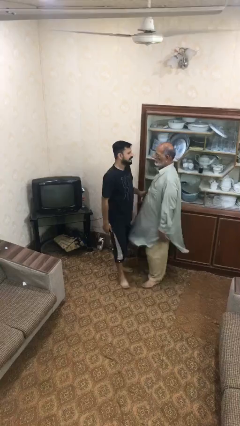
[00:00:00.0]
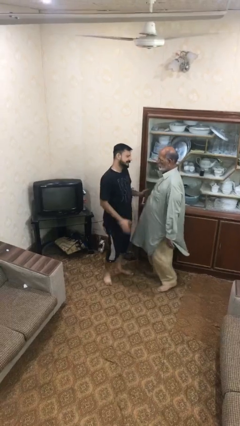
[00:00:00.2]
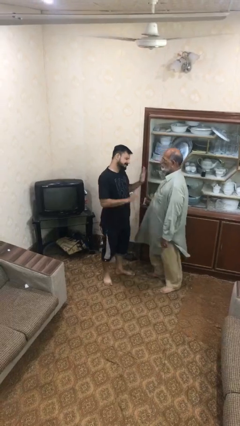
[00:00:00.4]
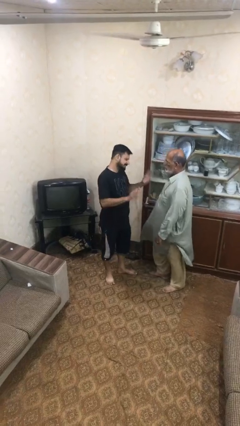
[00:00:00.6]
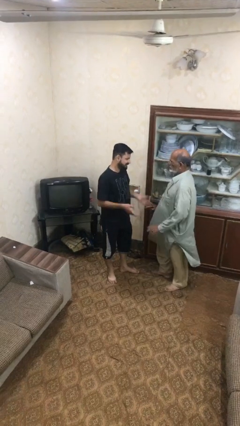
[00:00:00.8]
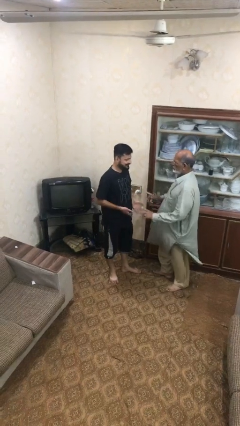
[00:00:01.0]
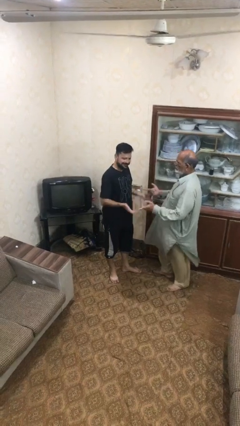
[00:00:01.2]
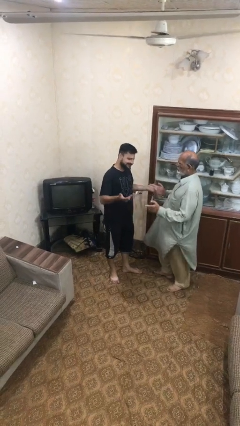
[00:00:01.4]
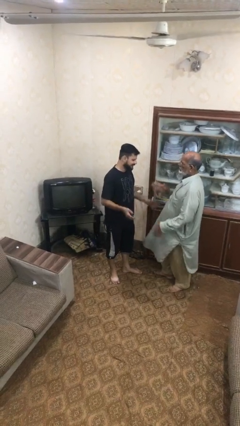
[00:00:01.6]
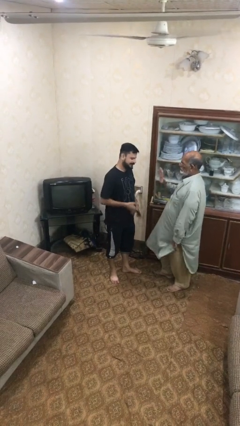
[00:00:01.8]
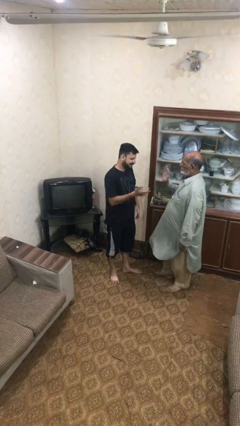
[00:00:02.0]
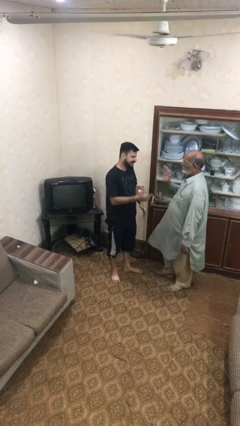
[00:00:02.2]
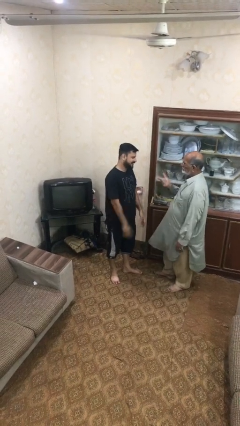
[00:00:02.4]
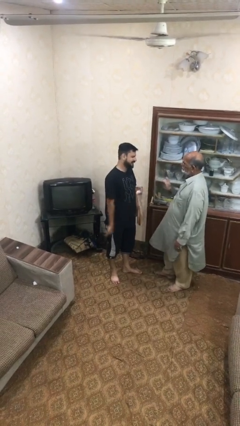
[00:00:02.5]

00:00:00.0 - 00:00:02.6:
person talks to person

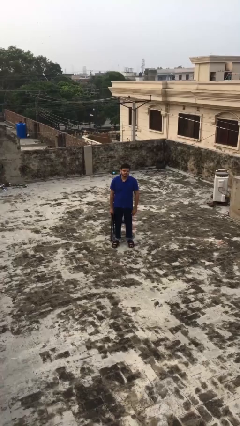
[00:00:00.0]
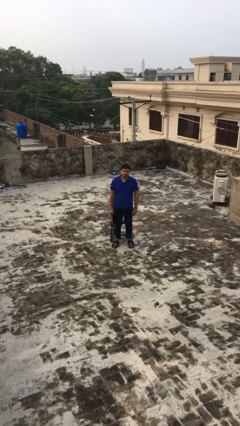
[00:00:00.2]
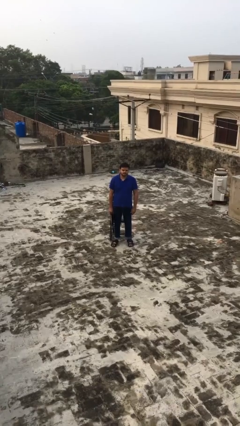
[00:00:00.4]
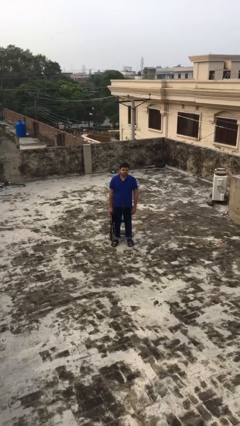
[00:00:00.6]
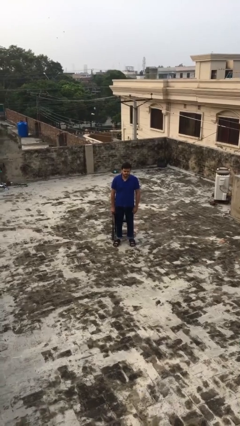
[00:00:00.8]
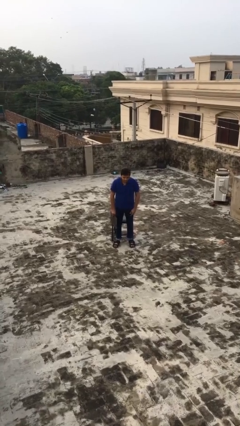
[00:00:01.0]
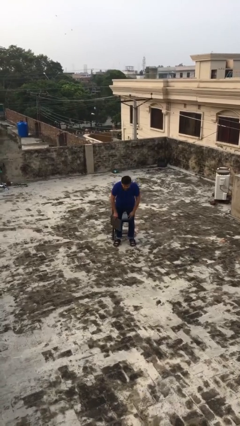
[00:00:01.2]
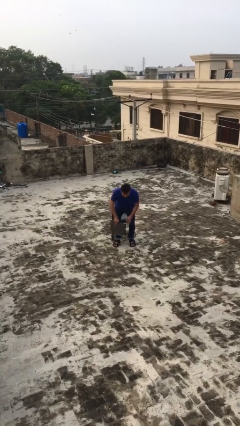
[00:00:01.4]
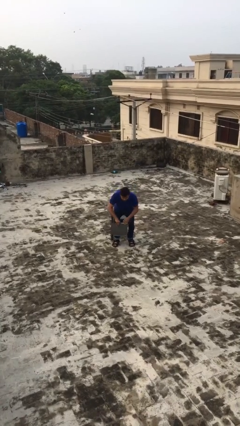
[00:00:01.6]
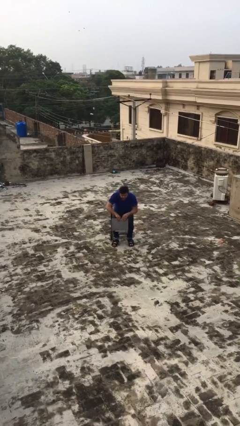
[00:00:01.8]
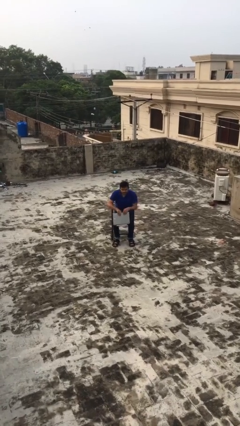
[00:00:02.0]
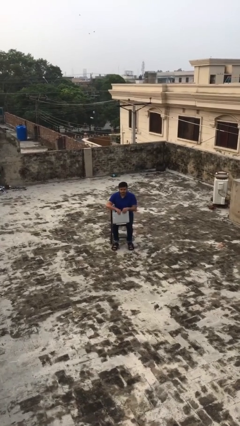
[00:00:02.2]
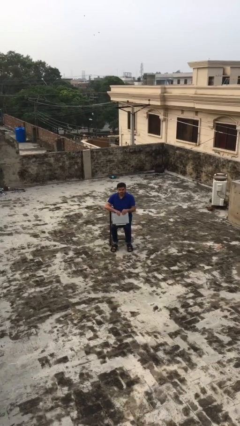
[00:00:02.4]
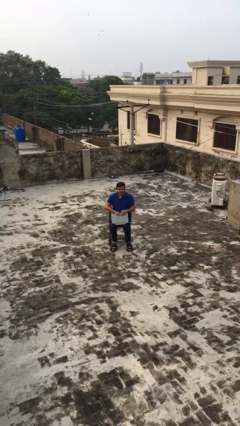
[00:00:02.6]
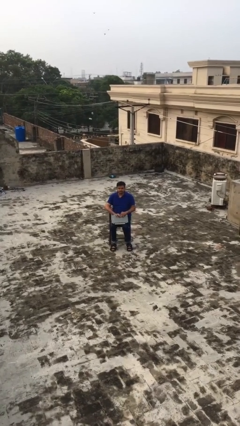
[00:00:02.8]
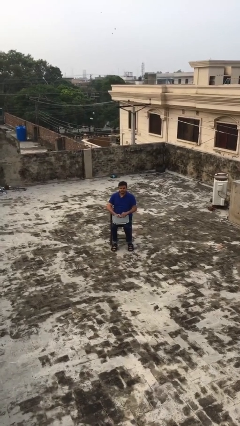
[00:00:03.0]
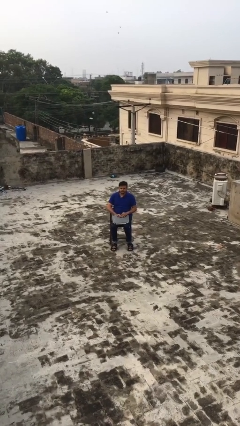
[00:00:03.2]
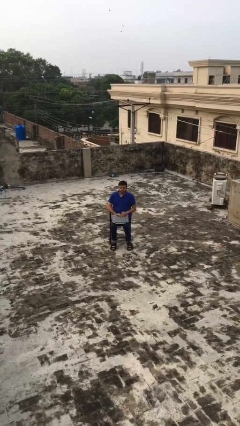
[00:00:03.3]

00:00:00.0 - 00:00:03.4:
person sits down

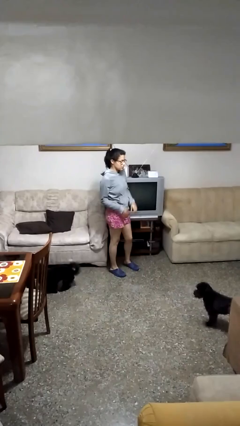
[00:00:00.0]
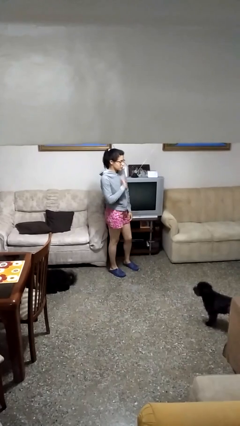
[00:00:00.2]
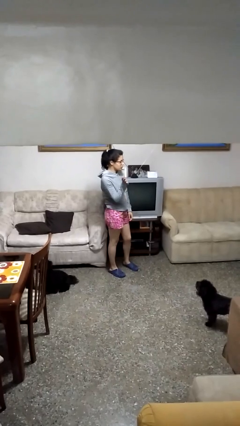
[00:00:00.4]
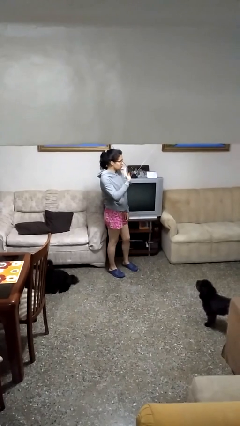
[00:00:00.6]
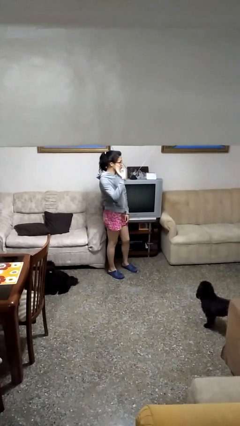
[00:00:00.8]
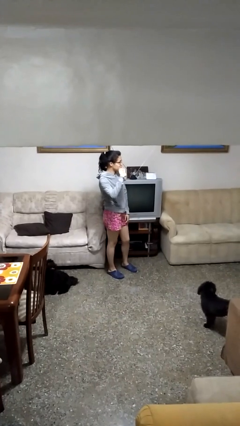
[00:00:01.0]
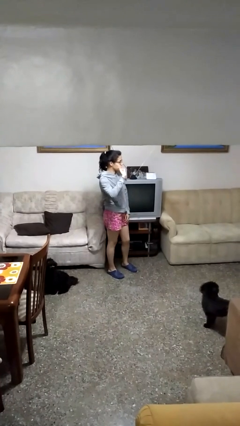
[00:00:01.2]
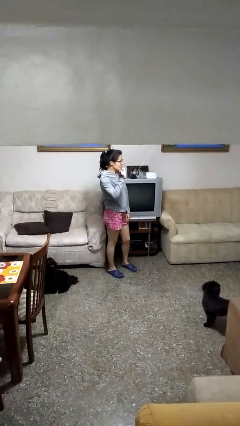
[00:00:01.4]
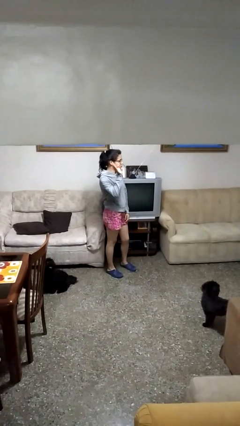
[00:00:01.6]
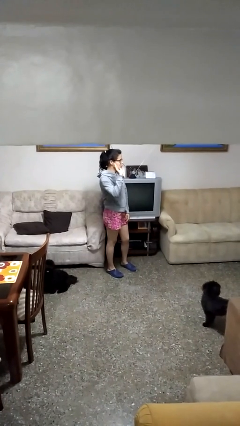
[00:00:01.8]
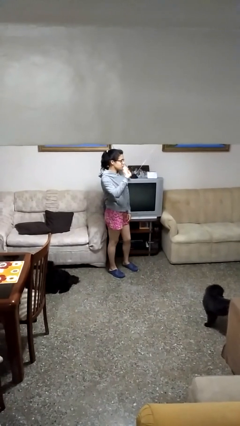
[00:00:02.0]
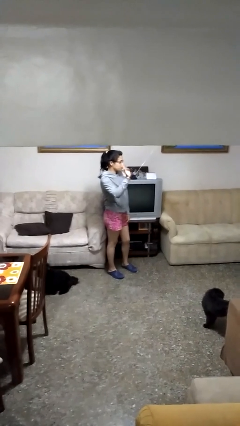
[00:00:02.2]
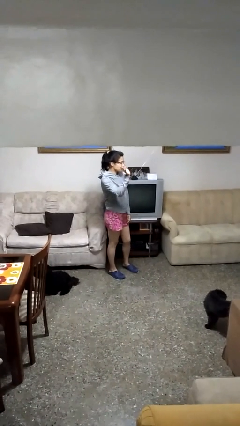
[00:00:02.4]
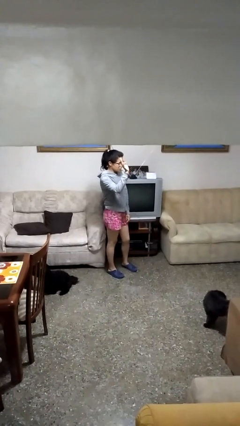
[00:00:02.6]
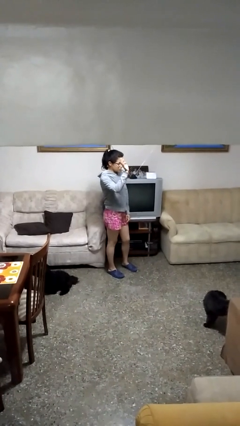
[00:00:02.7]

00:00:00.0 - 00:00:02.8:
person waves at person

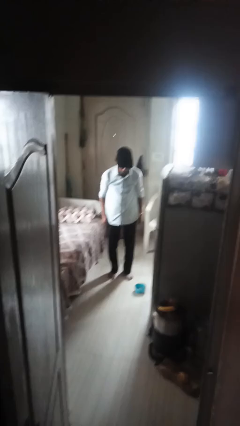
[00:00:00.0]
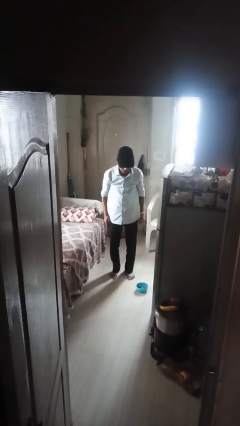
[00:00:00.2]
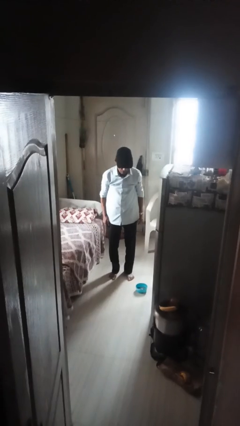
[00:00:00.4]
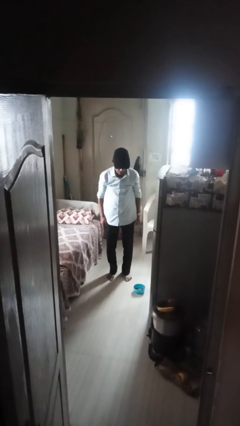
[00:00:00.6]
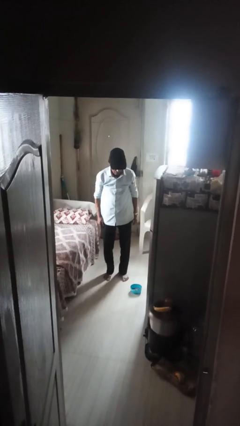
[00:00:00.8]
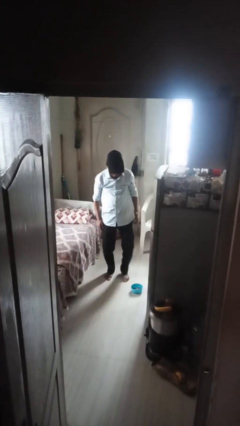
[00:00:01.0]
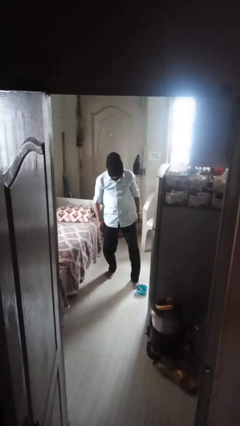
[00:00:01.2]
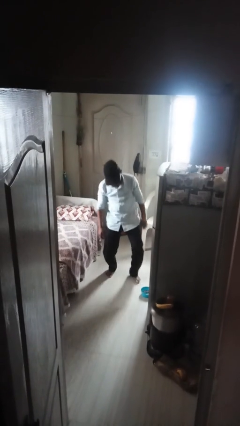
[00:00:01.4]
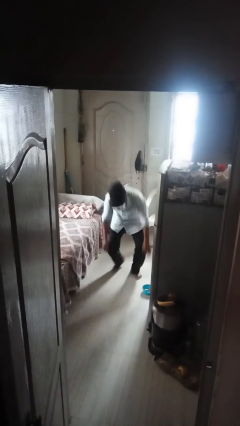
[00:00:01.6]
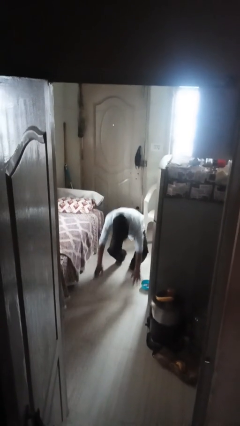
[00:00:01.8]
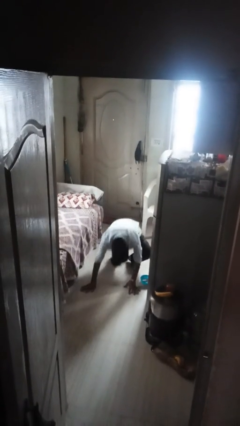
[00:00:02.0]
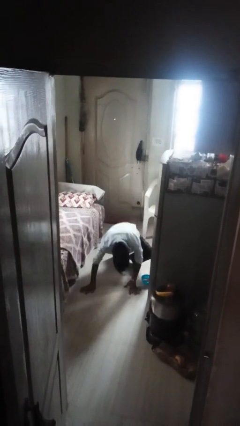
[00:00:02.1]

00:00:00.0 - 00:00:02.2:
person trips on object on floor

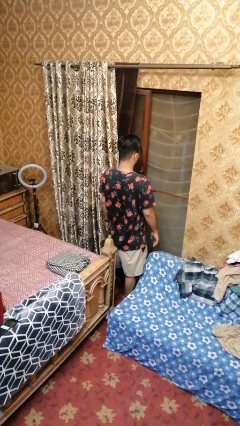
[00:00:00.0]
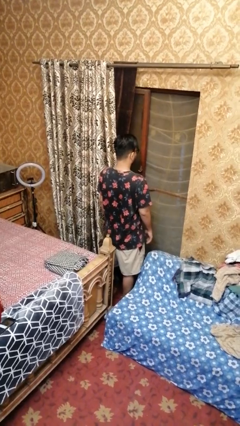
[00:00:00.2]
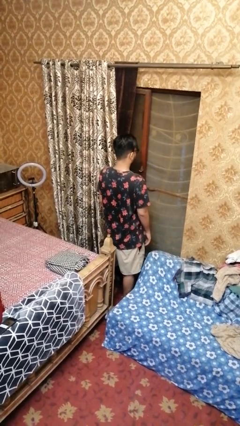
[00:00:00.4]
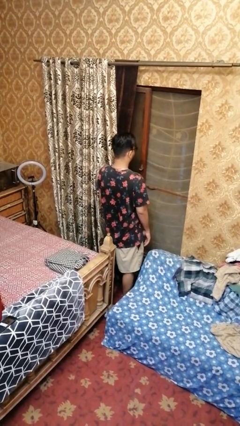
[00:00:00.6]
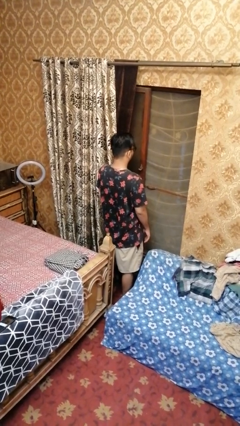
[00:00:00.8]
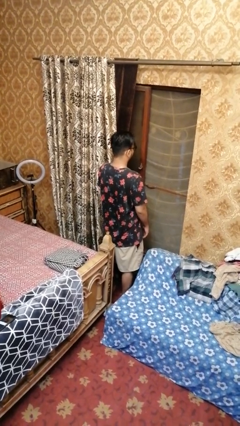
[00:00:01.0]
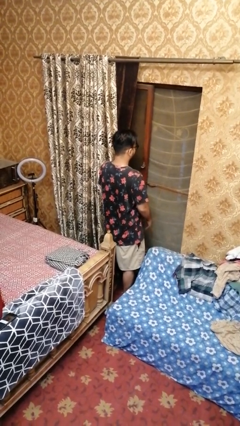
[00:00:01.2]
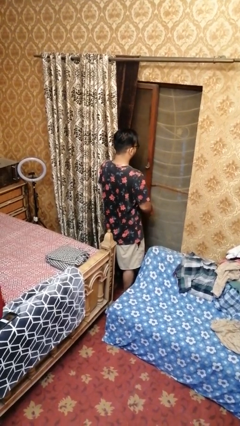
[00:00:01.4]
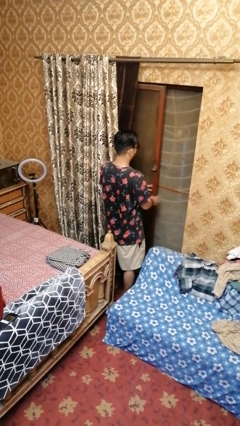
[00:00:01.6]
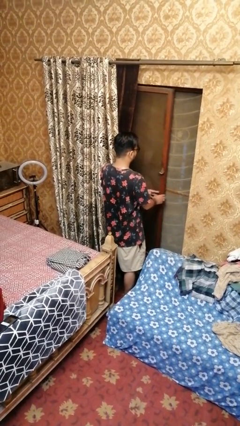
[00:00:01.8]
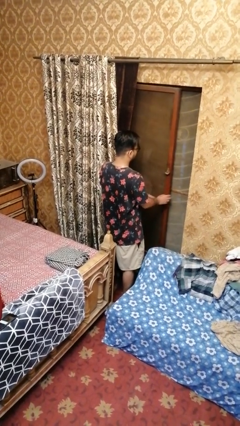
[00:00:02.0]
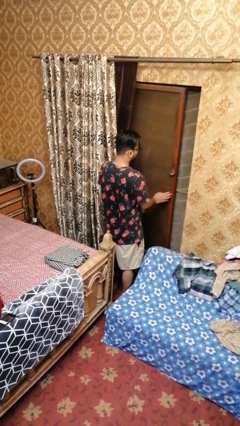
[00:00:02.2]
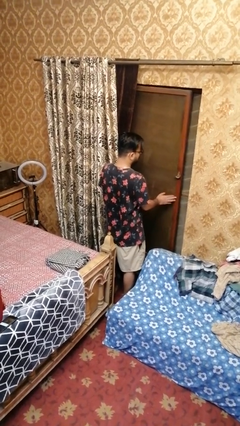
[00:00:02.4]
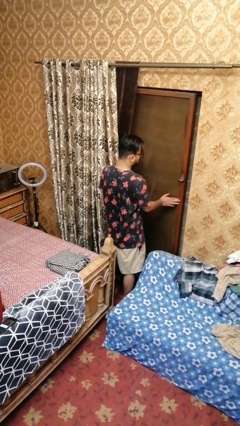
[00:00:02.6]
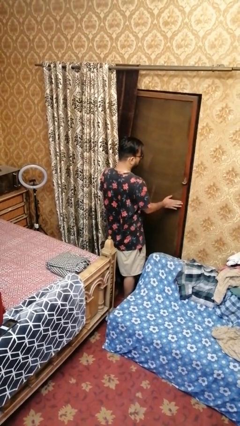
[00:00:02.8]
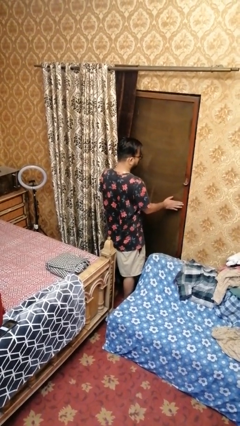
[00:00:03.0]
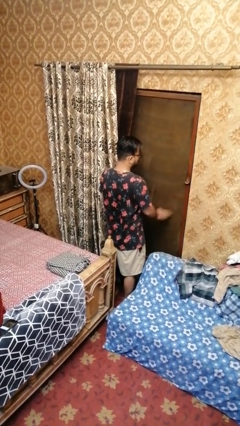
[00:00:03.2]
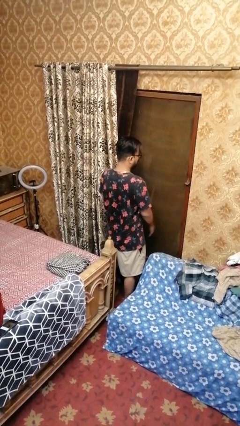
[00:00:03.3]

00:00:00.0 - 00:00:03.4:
person closes home window

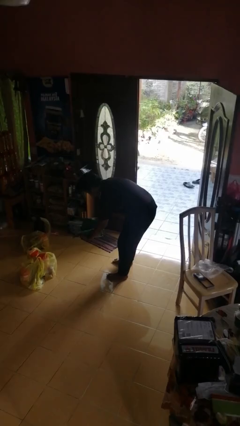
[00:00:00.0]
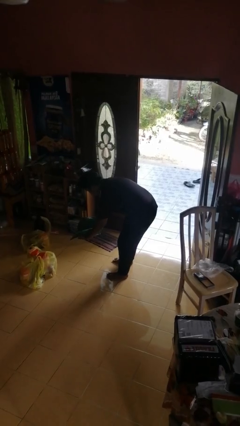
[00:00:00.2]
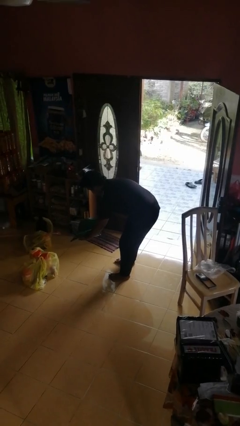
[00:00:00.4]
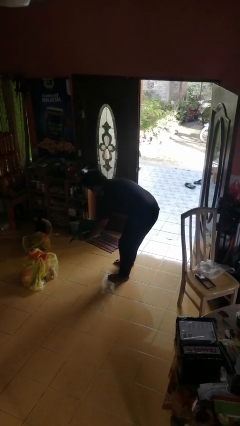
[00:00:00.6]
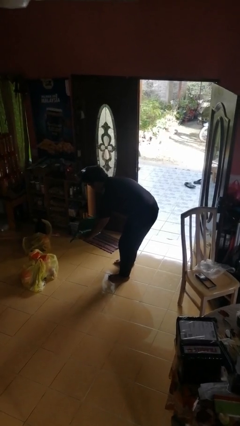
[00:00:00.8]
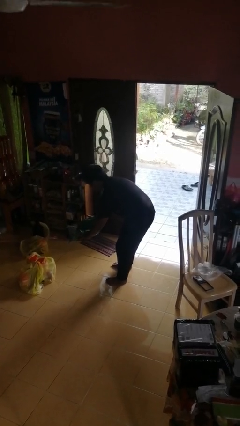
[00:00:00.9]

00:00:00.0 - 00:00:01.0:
person catches dropped object

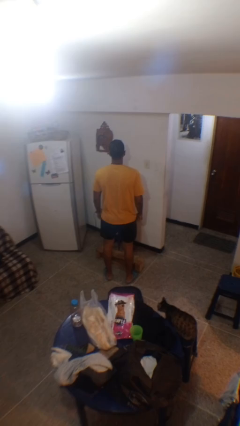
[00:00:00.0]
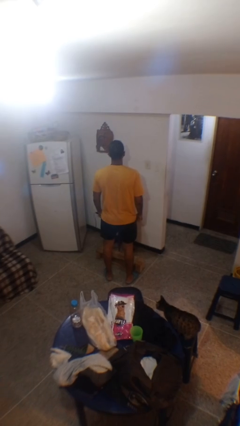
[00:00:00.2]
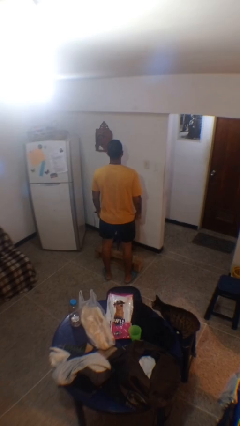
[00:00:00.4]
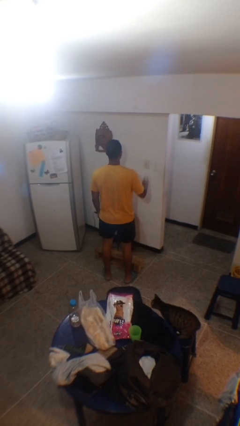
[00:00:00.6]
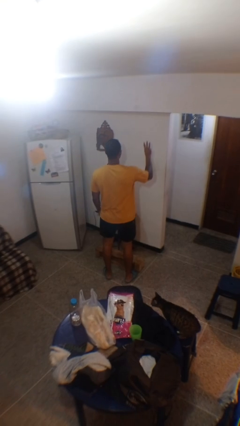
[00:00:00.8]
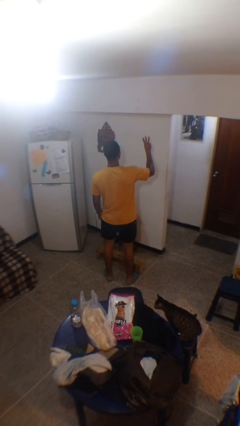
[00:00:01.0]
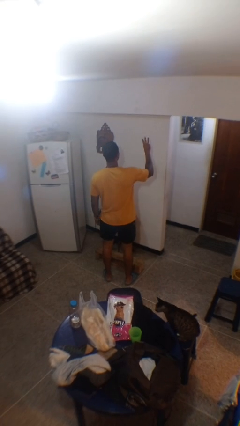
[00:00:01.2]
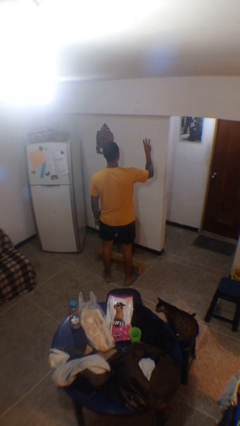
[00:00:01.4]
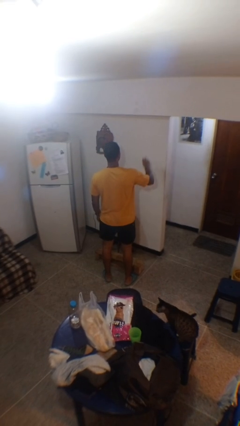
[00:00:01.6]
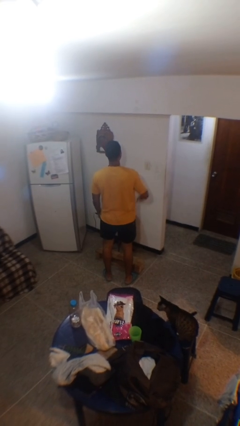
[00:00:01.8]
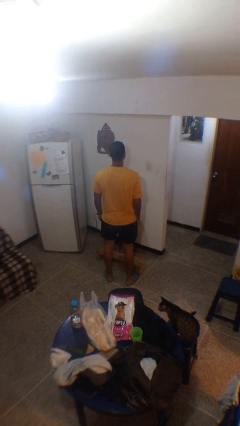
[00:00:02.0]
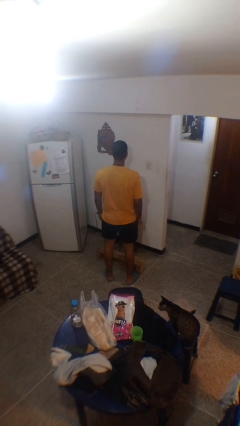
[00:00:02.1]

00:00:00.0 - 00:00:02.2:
person gestures number three
